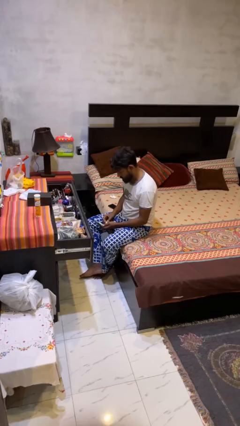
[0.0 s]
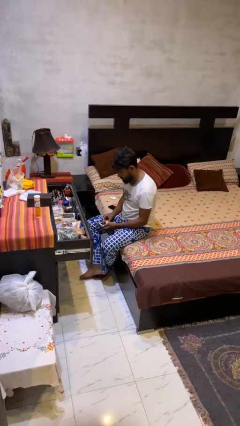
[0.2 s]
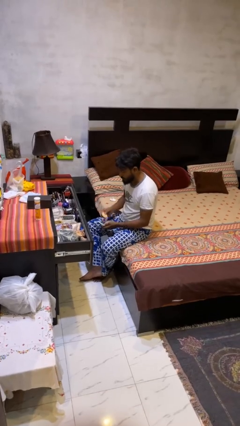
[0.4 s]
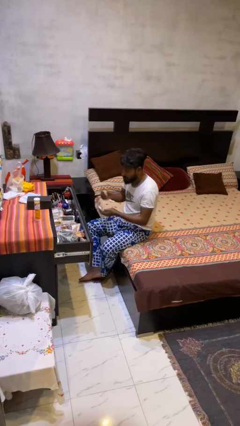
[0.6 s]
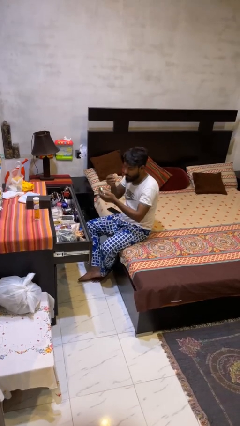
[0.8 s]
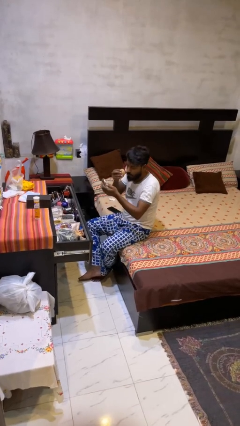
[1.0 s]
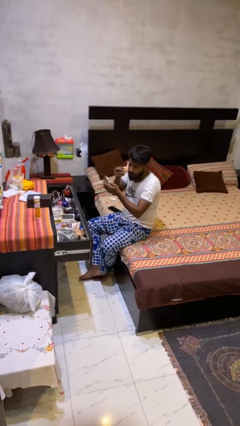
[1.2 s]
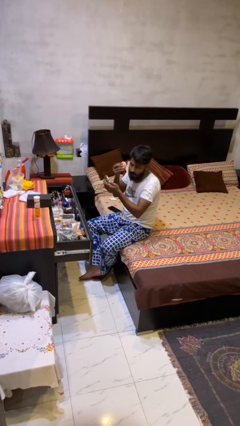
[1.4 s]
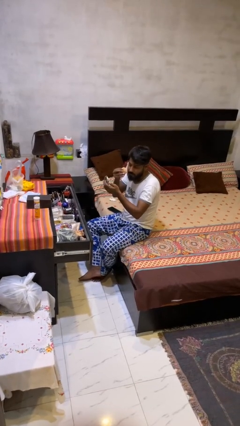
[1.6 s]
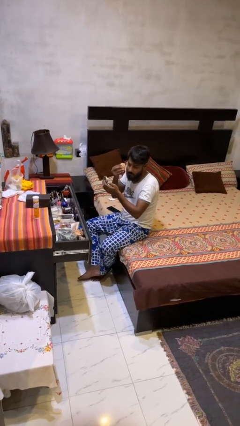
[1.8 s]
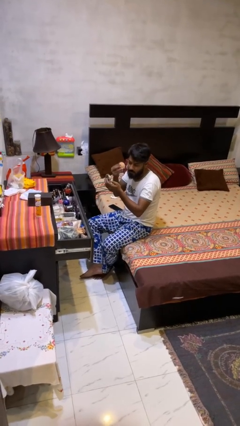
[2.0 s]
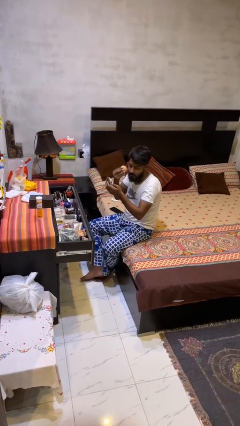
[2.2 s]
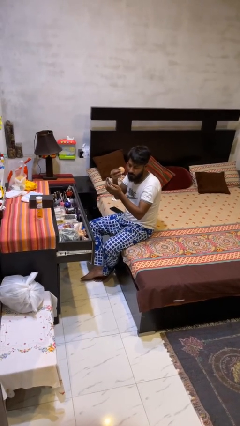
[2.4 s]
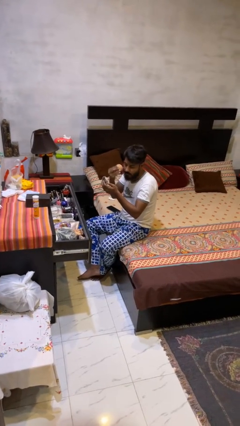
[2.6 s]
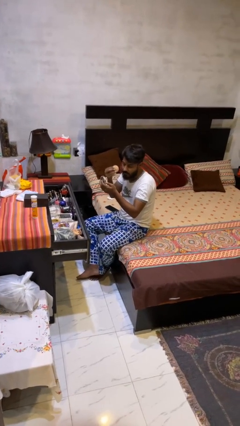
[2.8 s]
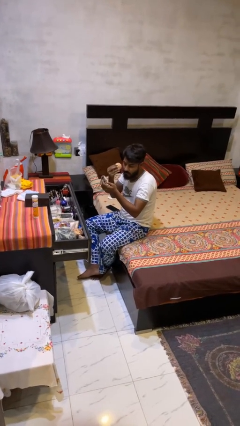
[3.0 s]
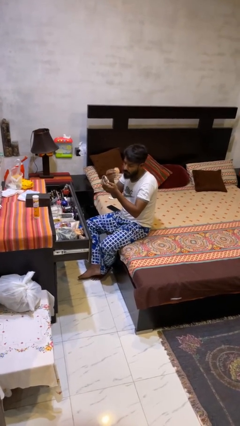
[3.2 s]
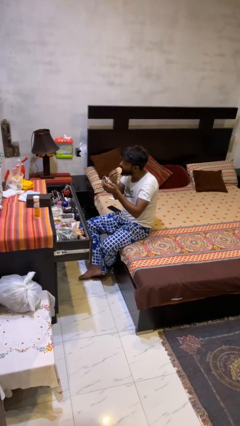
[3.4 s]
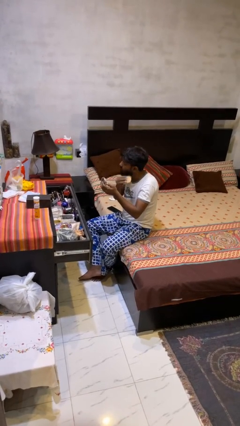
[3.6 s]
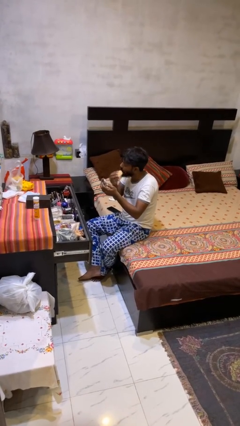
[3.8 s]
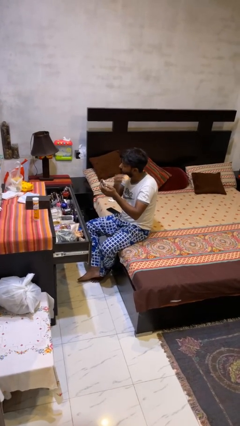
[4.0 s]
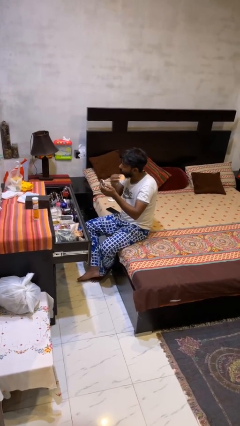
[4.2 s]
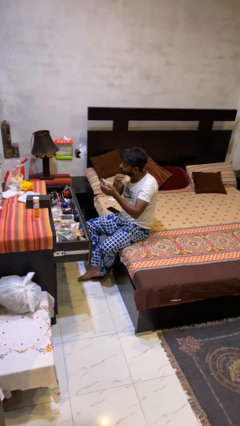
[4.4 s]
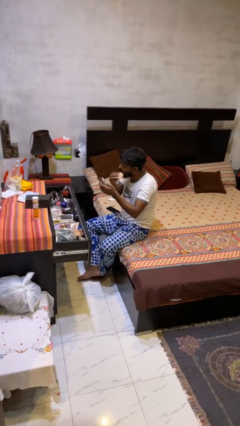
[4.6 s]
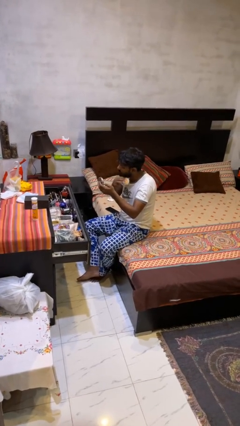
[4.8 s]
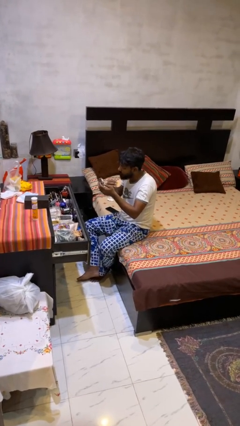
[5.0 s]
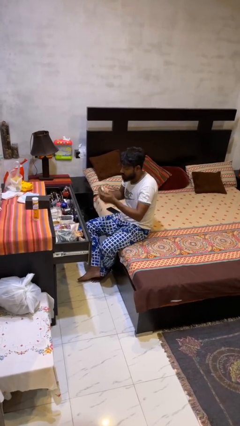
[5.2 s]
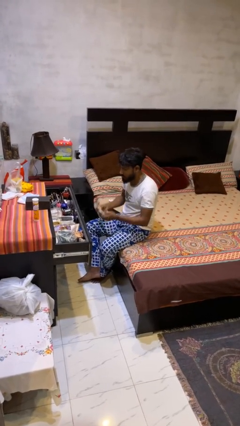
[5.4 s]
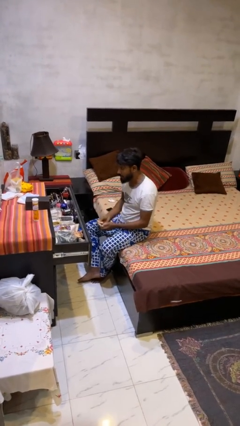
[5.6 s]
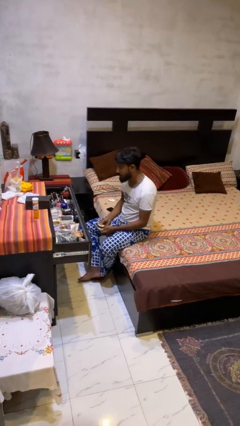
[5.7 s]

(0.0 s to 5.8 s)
person applies foundation makeup

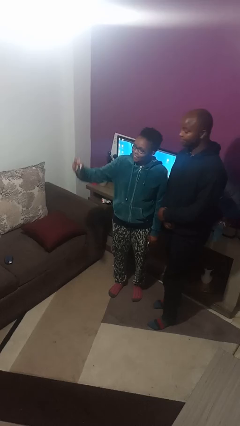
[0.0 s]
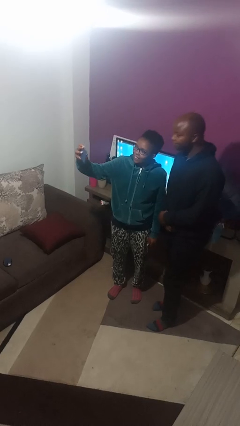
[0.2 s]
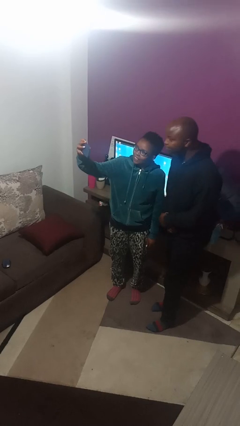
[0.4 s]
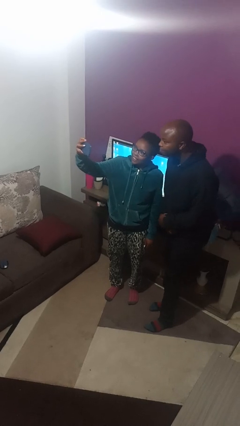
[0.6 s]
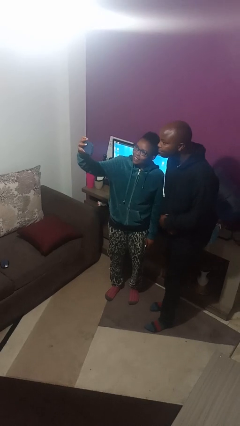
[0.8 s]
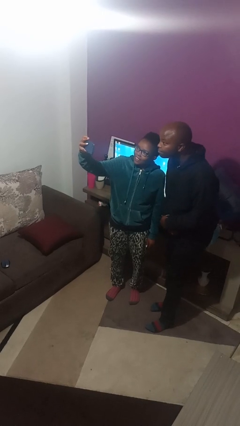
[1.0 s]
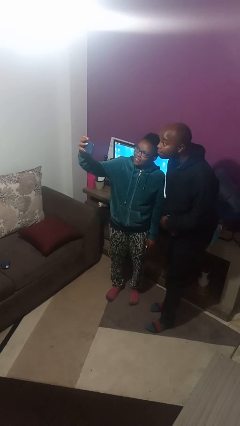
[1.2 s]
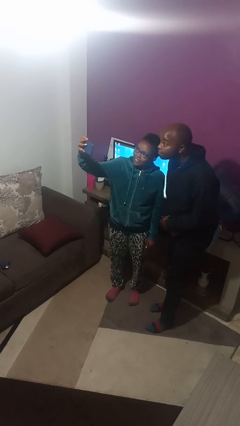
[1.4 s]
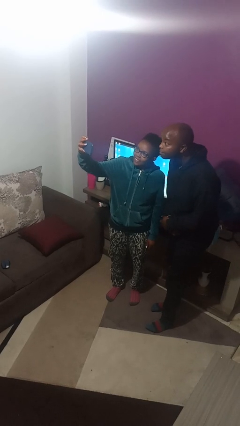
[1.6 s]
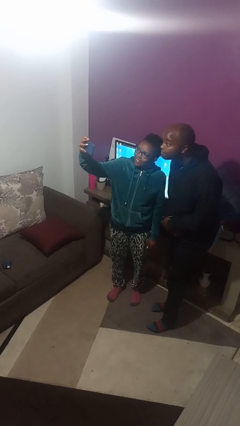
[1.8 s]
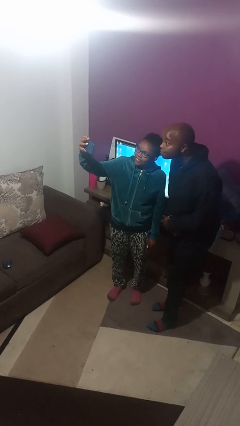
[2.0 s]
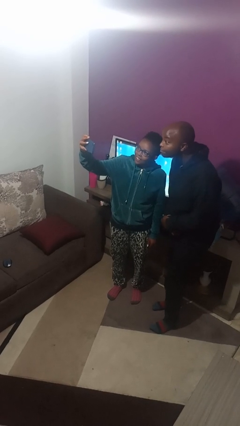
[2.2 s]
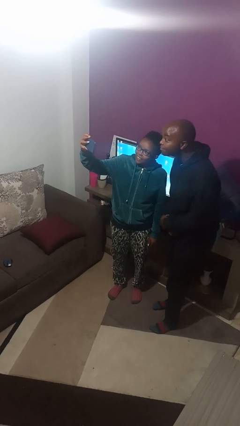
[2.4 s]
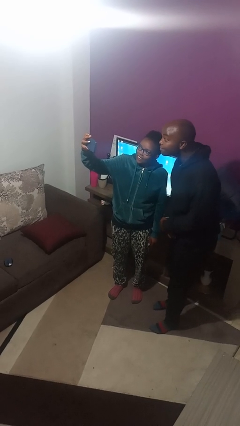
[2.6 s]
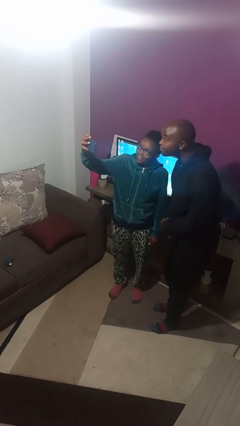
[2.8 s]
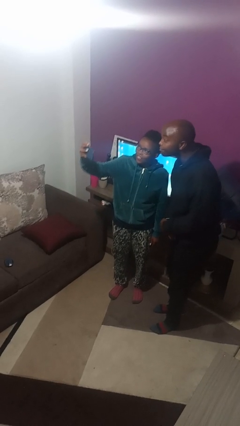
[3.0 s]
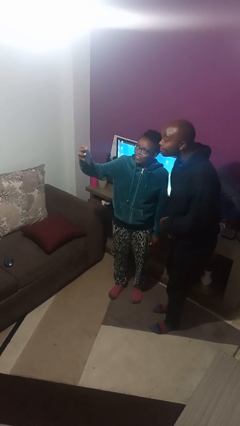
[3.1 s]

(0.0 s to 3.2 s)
person takes selfie with person

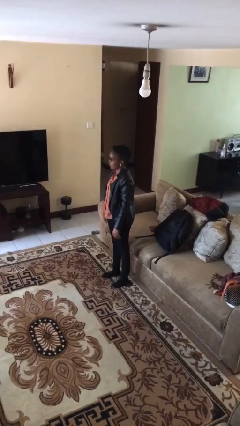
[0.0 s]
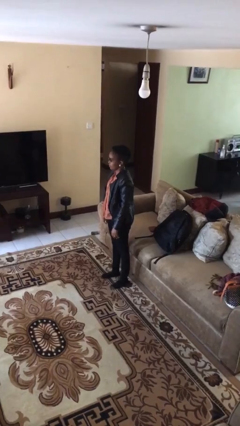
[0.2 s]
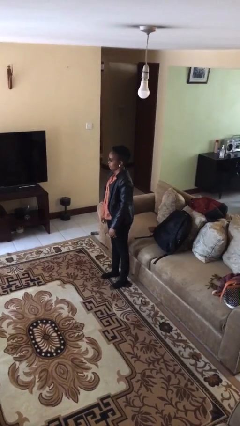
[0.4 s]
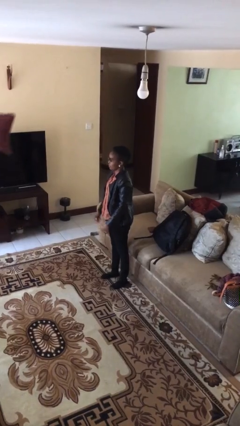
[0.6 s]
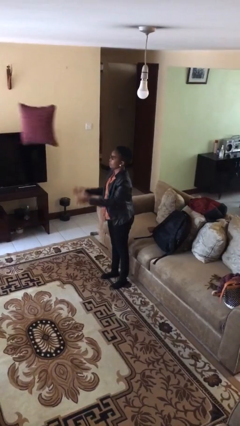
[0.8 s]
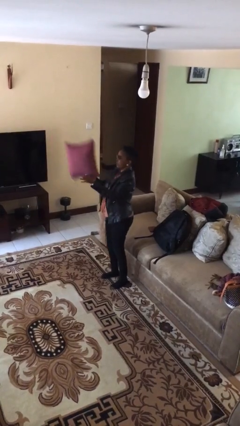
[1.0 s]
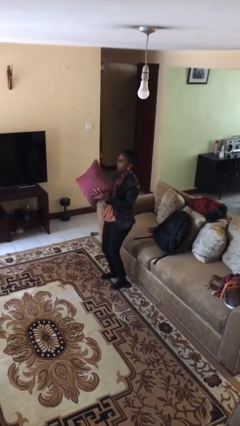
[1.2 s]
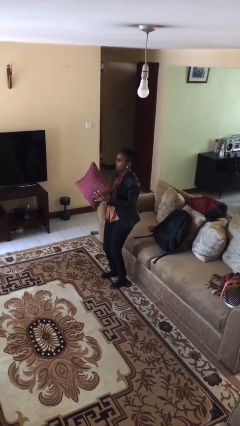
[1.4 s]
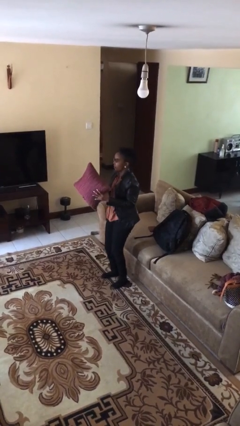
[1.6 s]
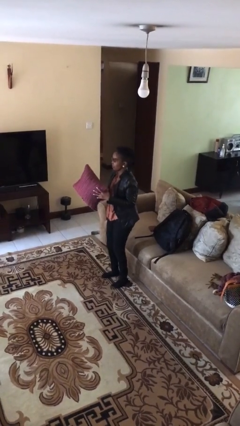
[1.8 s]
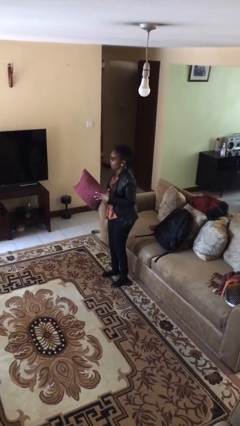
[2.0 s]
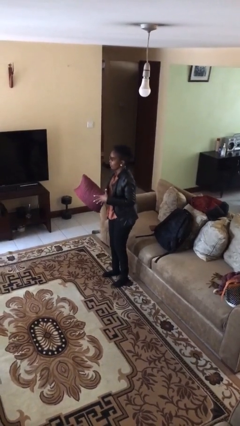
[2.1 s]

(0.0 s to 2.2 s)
person catches object from person

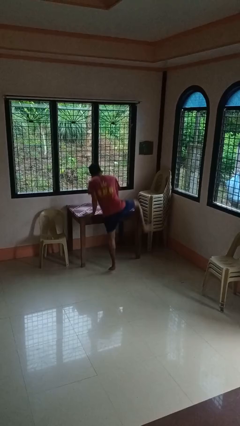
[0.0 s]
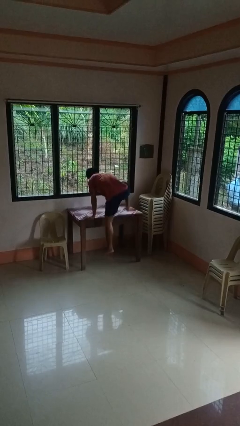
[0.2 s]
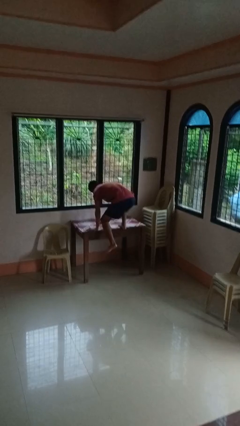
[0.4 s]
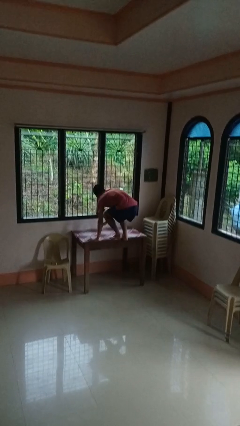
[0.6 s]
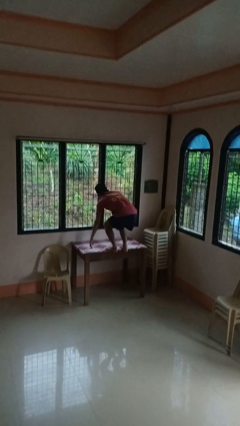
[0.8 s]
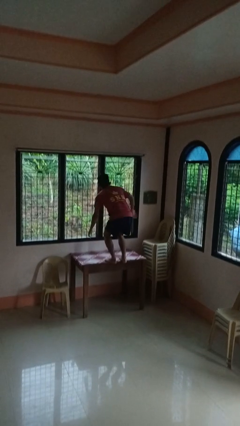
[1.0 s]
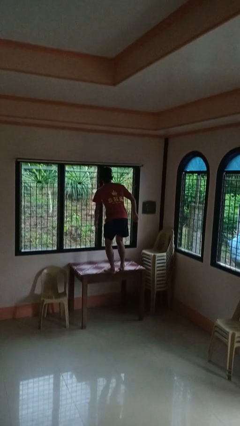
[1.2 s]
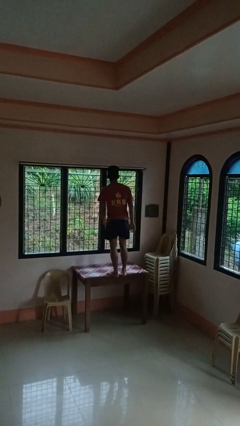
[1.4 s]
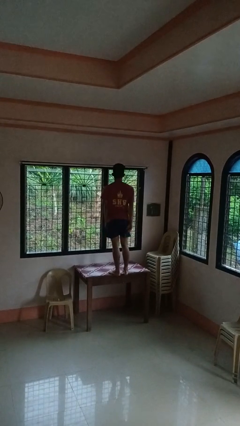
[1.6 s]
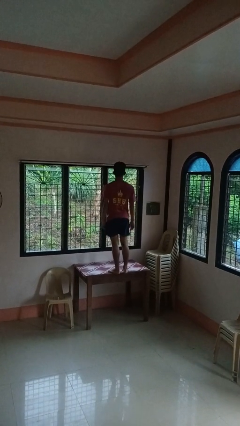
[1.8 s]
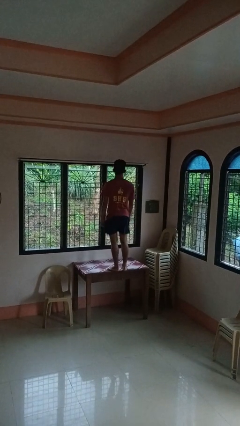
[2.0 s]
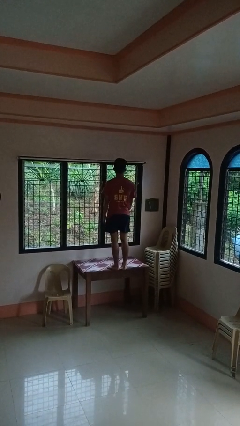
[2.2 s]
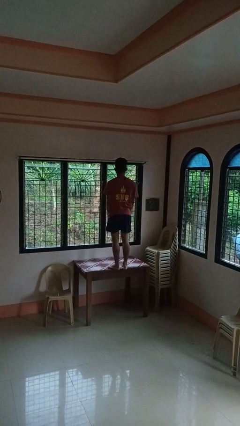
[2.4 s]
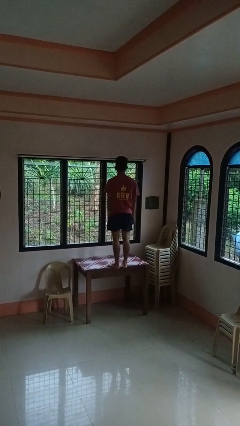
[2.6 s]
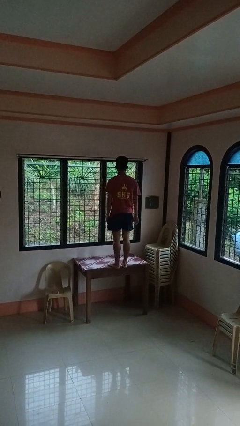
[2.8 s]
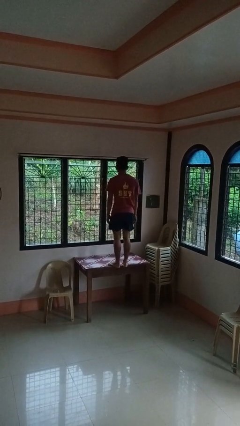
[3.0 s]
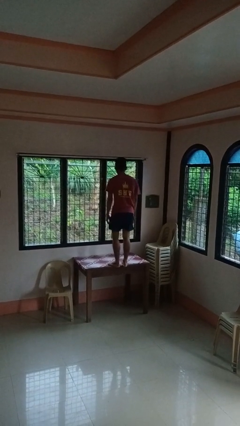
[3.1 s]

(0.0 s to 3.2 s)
person climbs on table

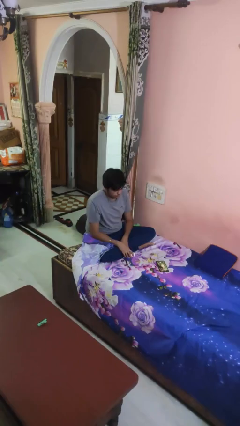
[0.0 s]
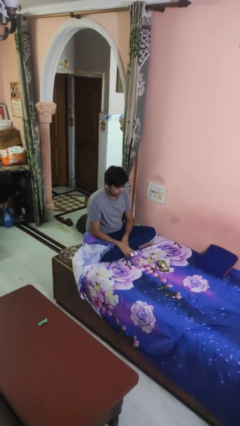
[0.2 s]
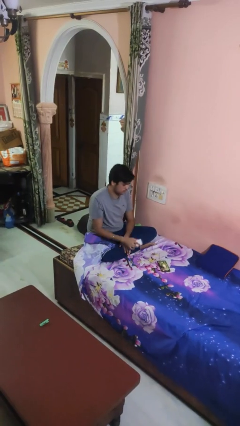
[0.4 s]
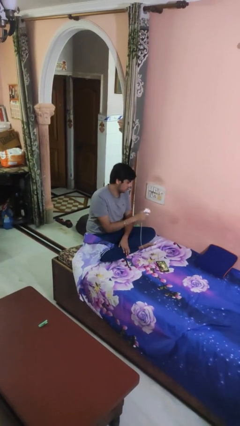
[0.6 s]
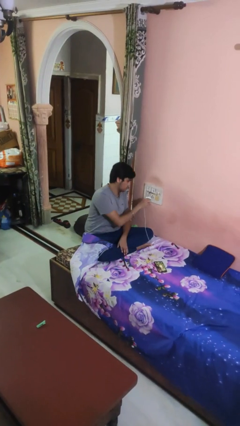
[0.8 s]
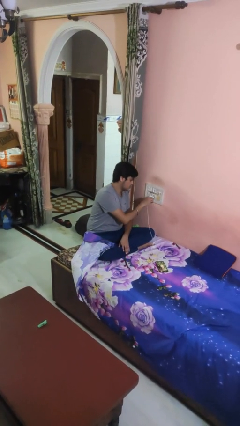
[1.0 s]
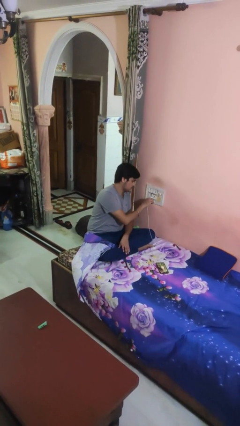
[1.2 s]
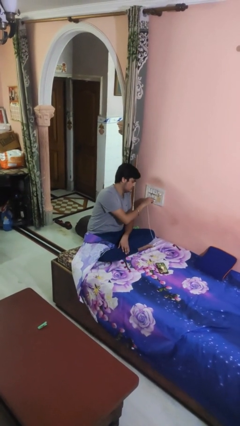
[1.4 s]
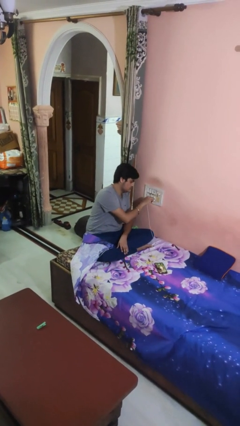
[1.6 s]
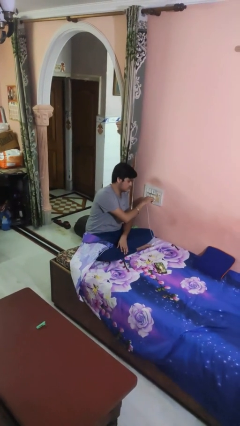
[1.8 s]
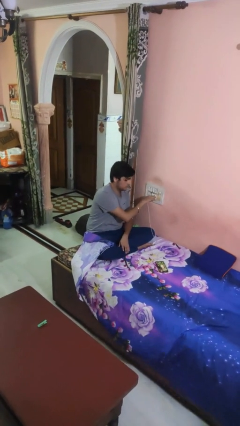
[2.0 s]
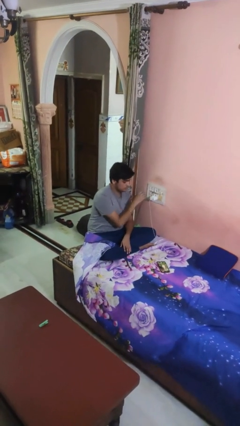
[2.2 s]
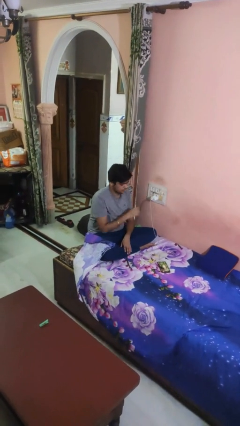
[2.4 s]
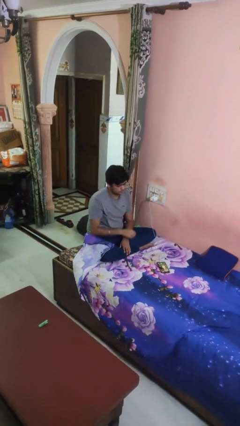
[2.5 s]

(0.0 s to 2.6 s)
person plugs into electrical socket

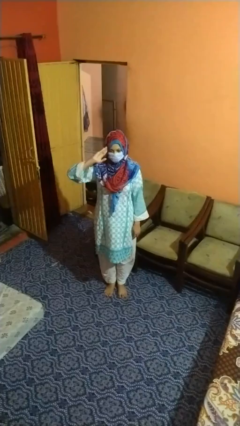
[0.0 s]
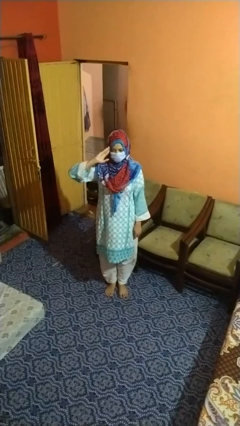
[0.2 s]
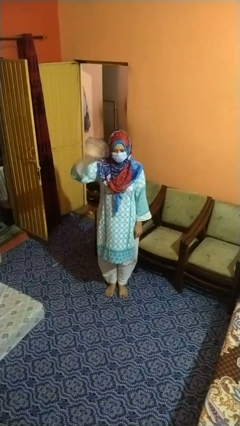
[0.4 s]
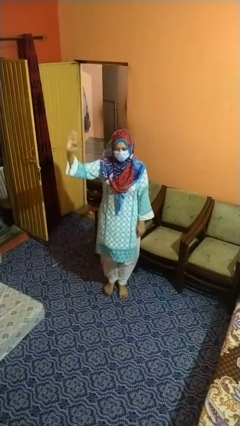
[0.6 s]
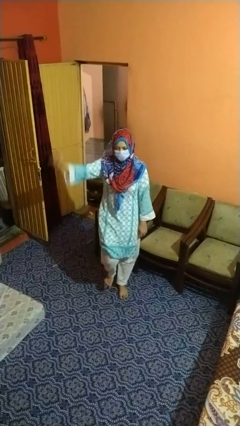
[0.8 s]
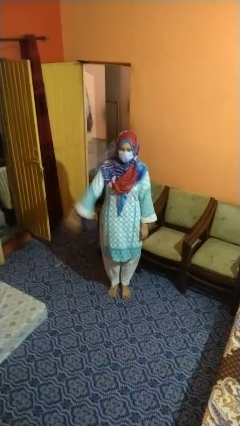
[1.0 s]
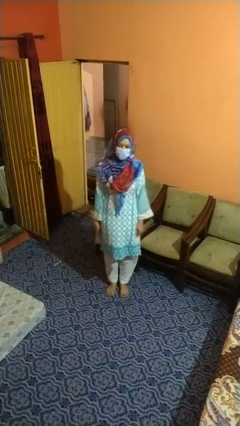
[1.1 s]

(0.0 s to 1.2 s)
person salutes
